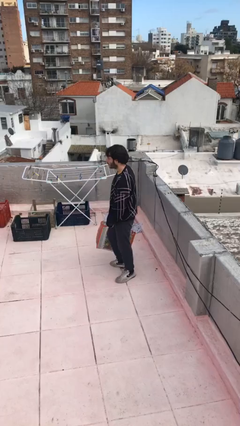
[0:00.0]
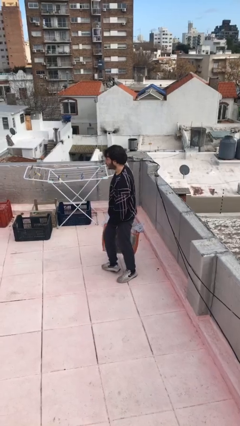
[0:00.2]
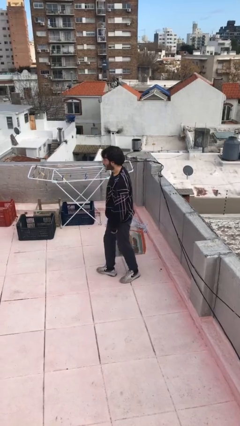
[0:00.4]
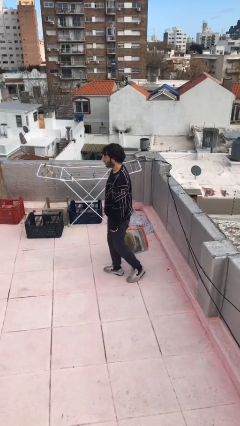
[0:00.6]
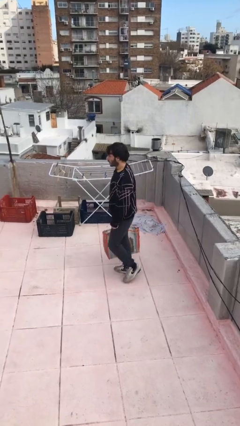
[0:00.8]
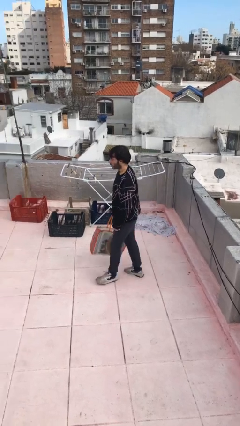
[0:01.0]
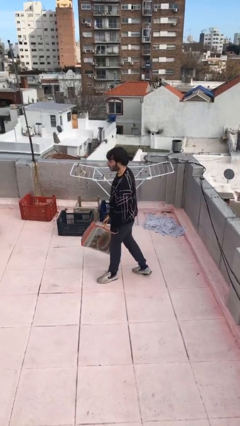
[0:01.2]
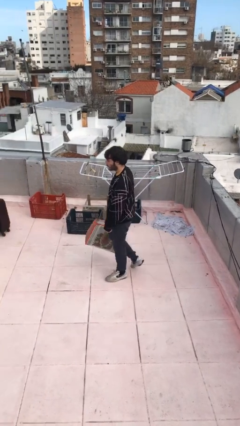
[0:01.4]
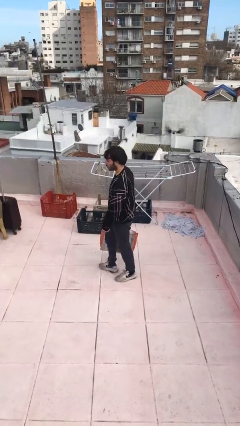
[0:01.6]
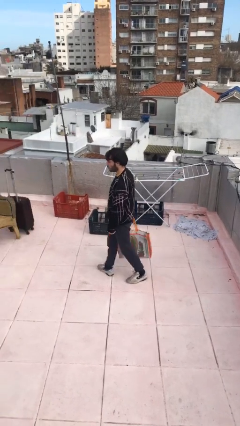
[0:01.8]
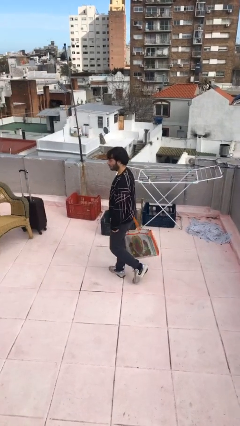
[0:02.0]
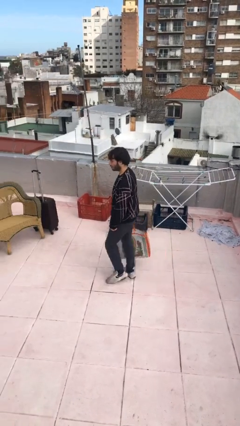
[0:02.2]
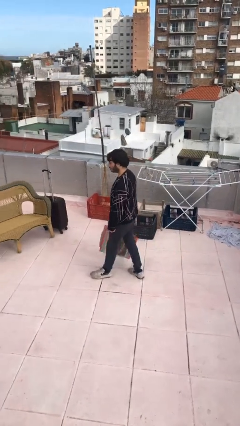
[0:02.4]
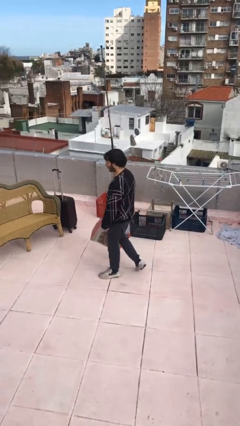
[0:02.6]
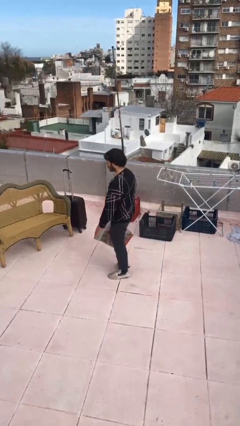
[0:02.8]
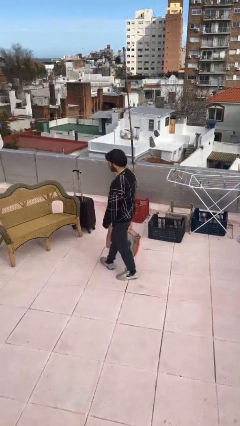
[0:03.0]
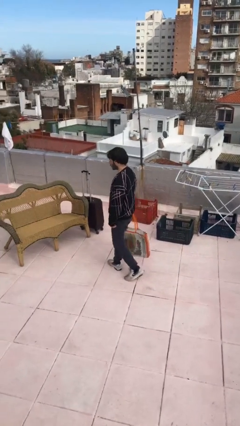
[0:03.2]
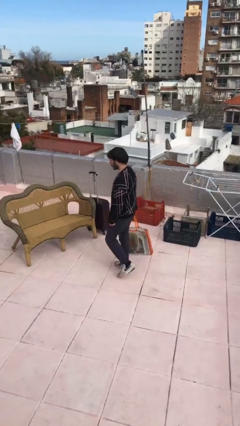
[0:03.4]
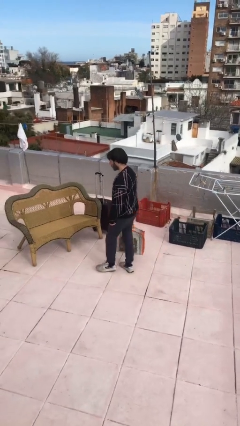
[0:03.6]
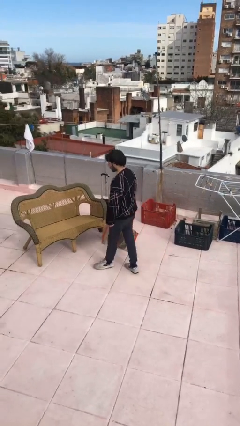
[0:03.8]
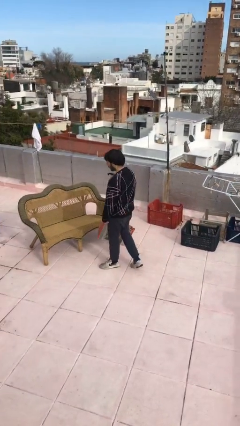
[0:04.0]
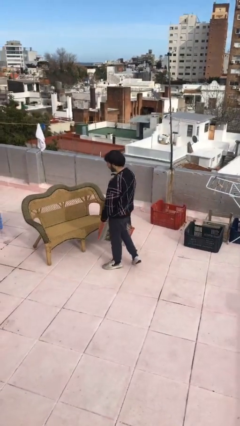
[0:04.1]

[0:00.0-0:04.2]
person carries groceries

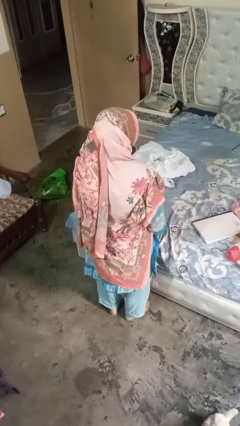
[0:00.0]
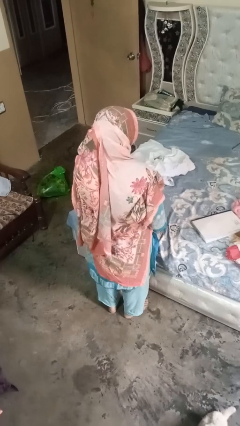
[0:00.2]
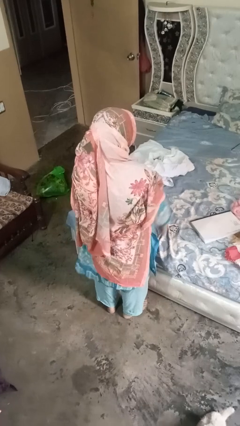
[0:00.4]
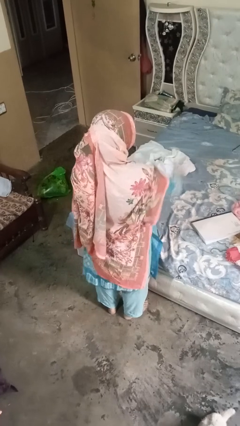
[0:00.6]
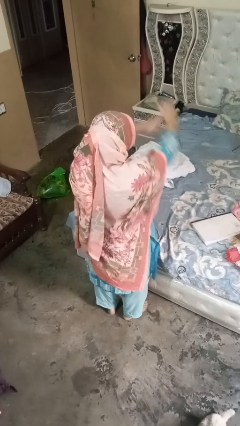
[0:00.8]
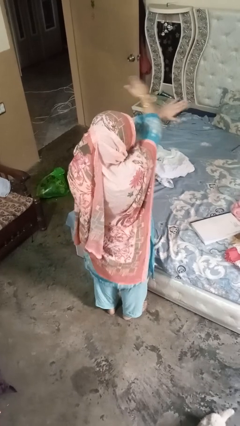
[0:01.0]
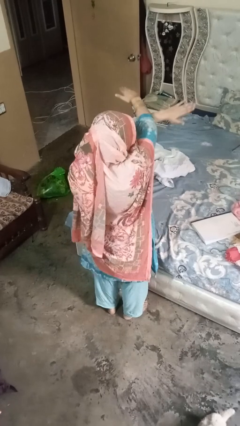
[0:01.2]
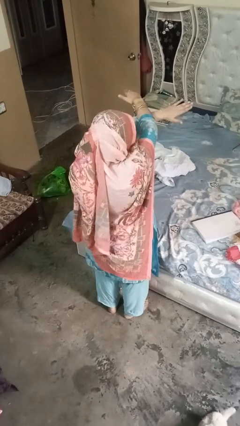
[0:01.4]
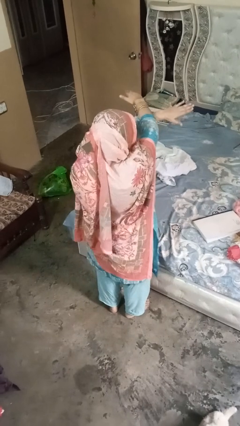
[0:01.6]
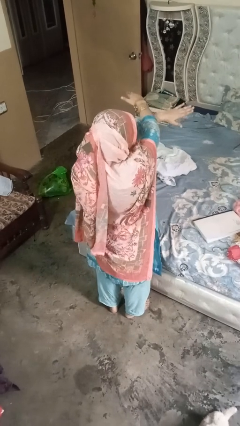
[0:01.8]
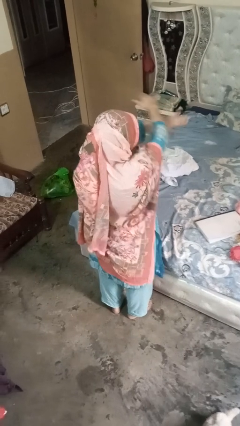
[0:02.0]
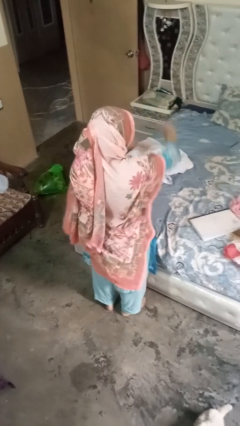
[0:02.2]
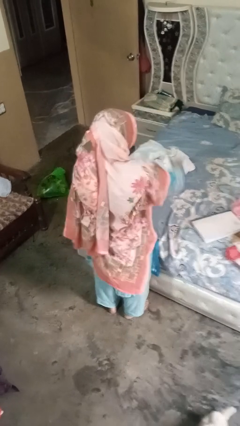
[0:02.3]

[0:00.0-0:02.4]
person gestures arms x

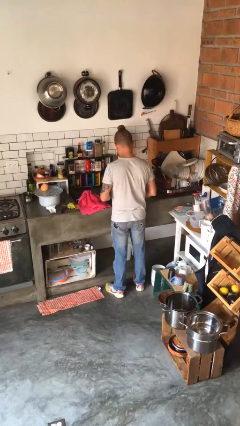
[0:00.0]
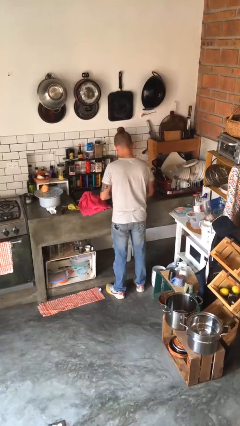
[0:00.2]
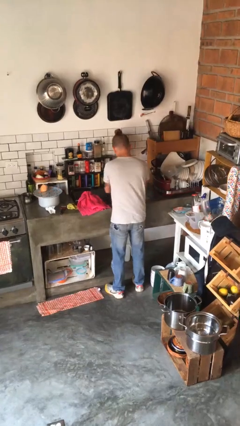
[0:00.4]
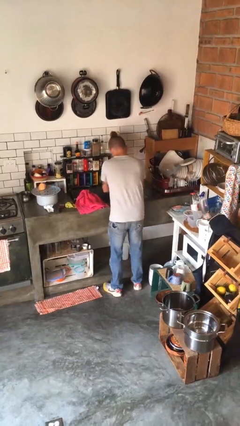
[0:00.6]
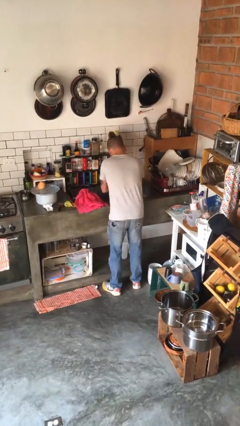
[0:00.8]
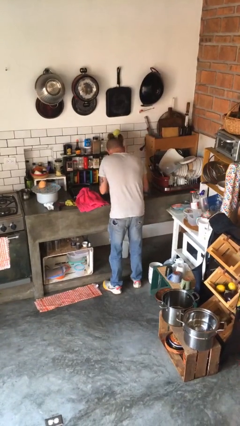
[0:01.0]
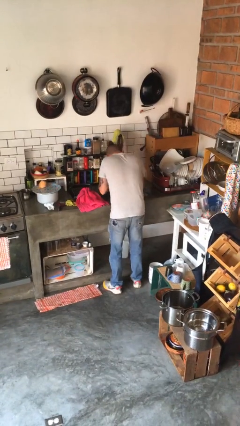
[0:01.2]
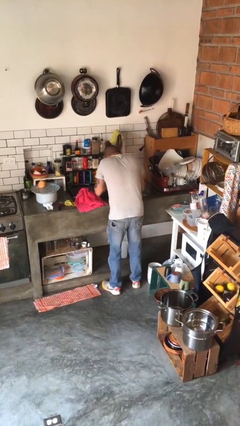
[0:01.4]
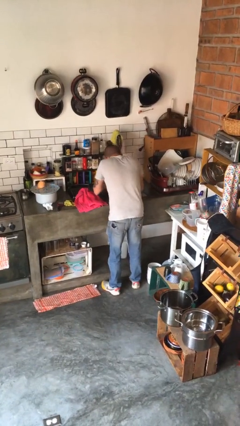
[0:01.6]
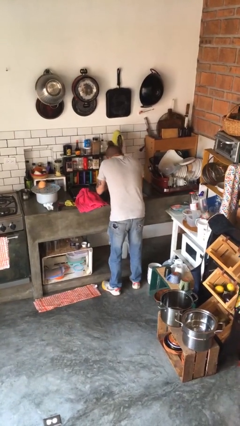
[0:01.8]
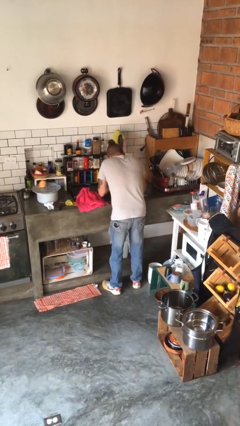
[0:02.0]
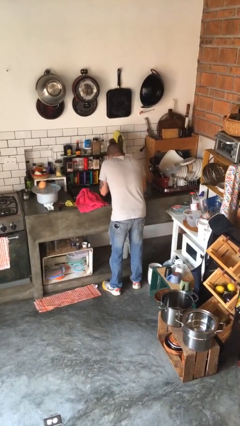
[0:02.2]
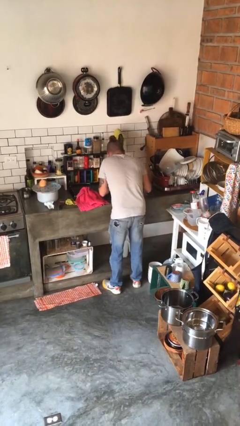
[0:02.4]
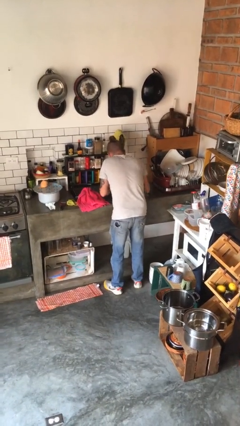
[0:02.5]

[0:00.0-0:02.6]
person washes face

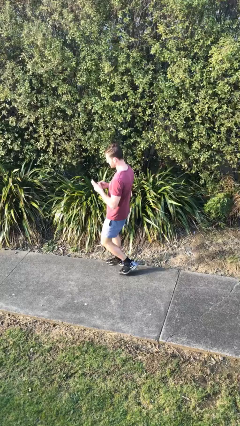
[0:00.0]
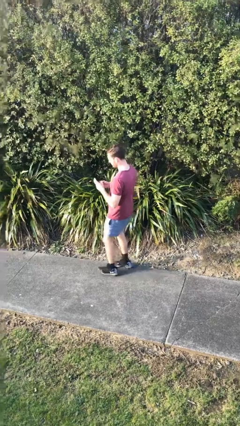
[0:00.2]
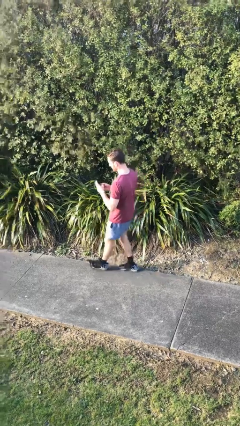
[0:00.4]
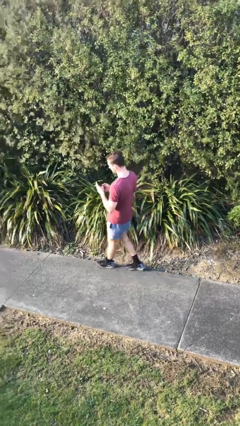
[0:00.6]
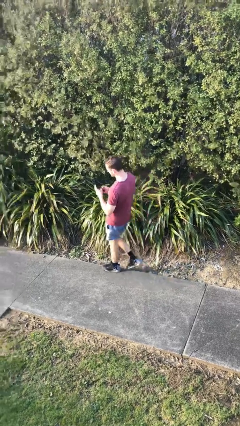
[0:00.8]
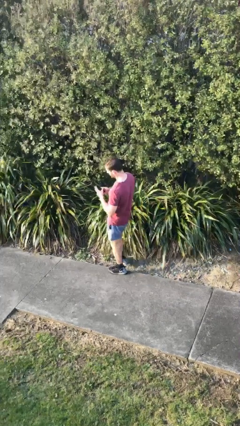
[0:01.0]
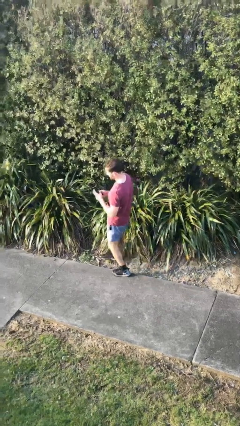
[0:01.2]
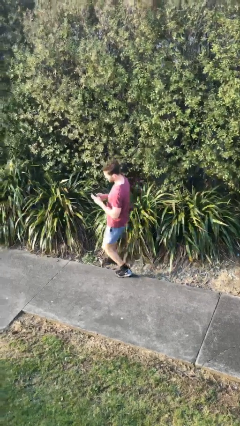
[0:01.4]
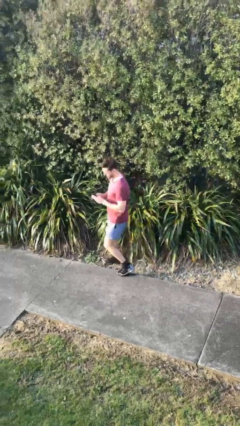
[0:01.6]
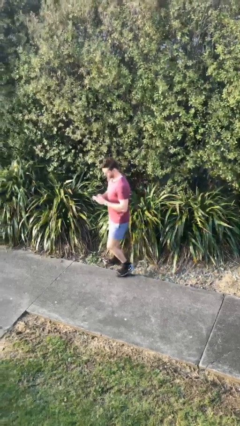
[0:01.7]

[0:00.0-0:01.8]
person texts on phone

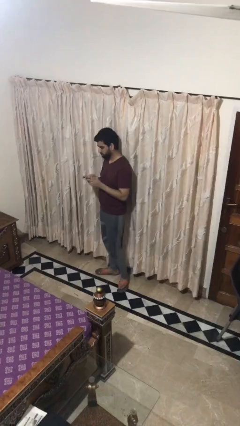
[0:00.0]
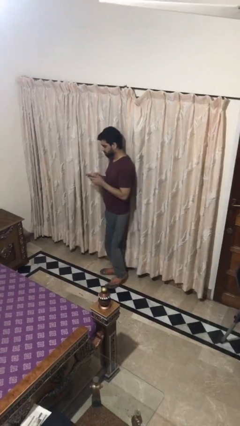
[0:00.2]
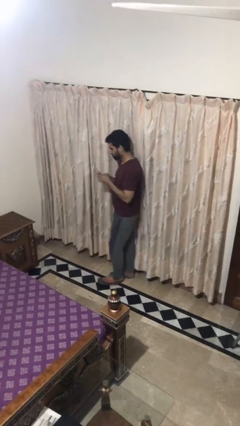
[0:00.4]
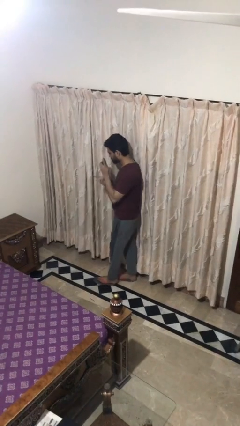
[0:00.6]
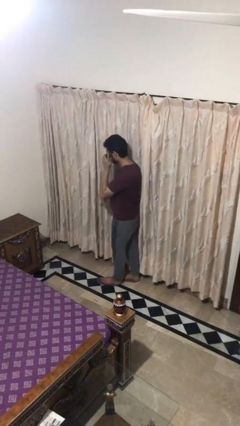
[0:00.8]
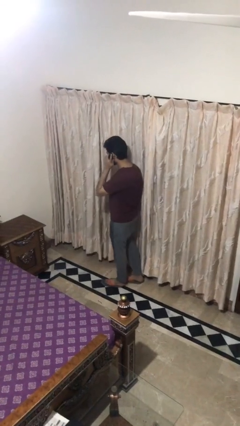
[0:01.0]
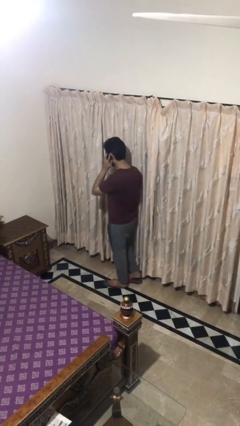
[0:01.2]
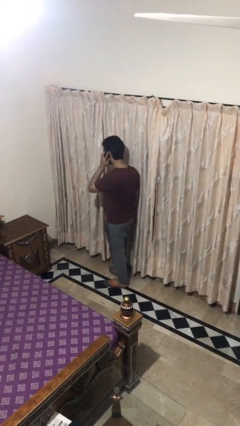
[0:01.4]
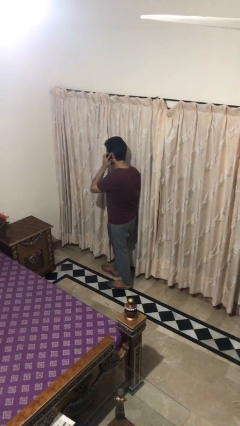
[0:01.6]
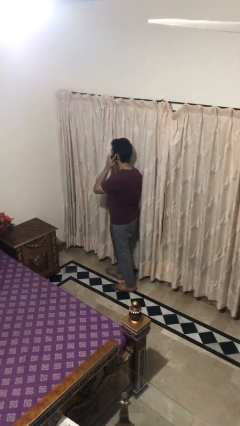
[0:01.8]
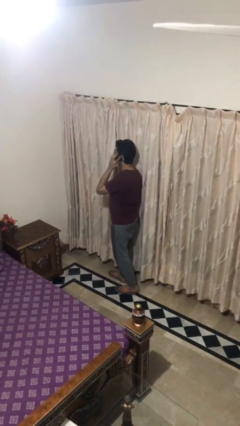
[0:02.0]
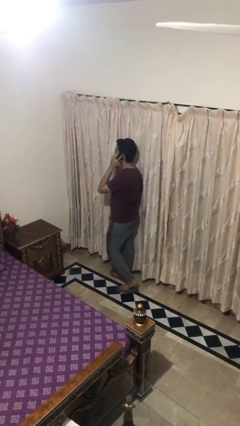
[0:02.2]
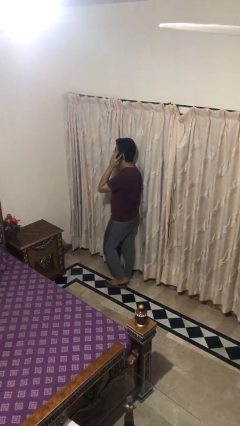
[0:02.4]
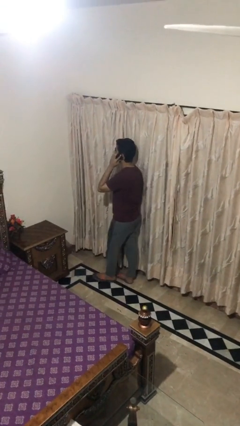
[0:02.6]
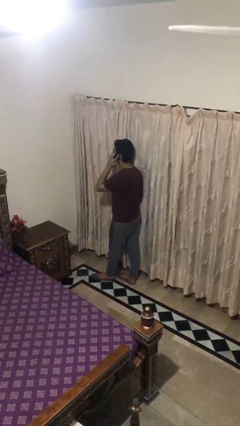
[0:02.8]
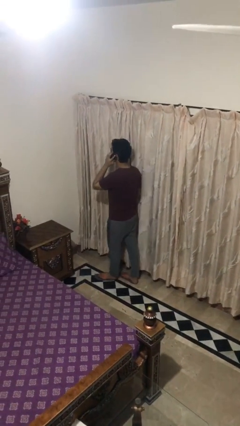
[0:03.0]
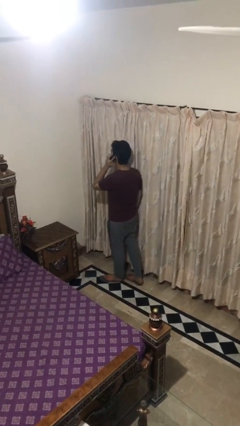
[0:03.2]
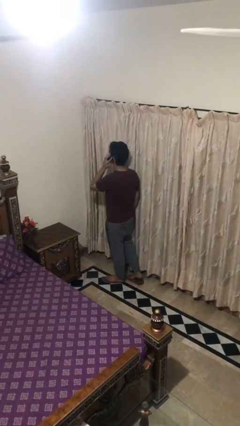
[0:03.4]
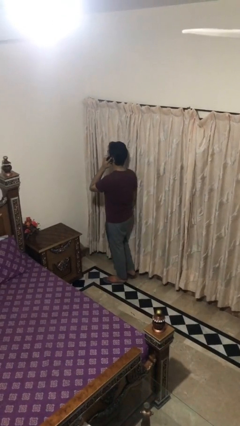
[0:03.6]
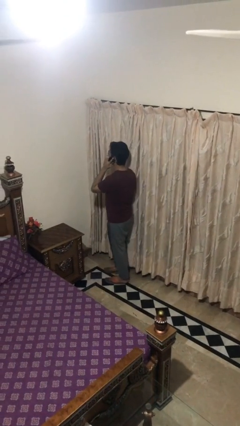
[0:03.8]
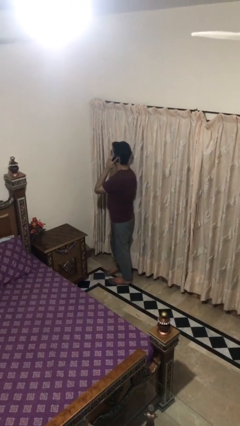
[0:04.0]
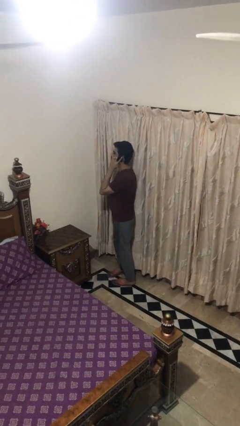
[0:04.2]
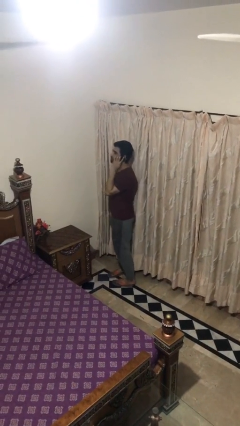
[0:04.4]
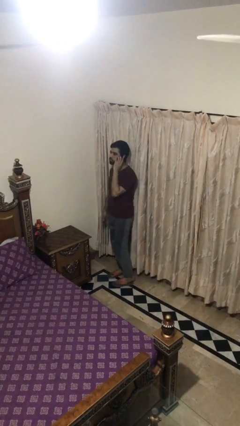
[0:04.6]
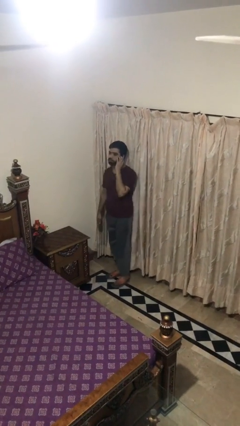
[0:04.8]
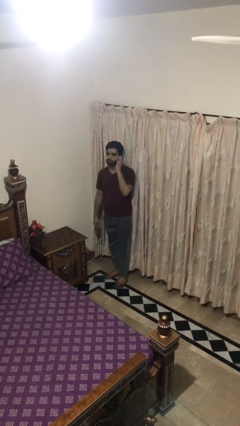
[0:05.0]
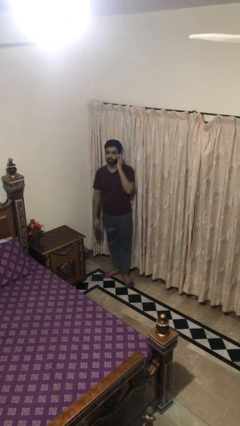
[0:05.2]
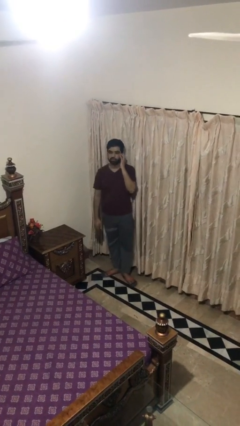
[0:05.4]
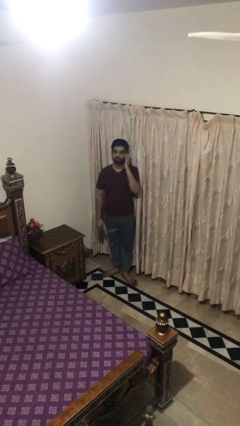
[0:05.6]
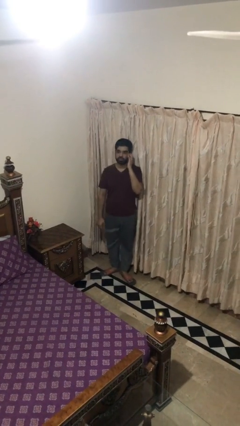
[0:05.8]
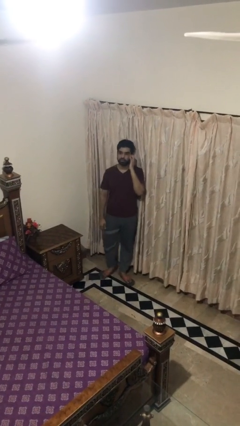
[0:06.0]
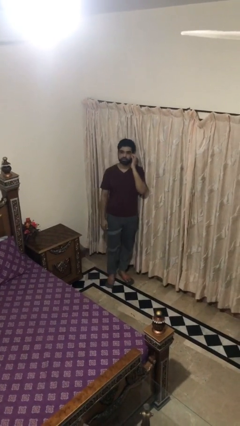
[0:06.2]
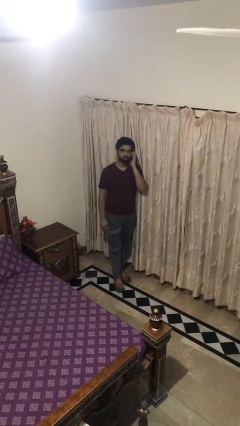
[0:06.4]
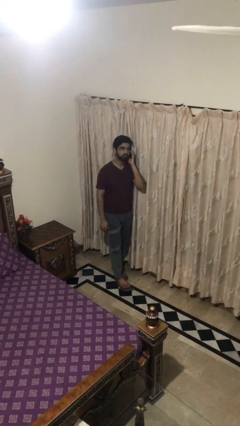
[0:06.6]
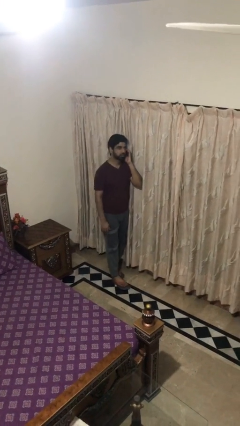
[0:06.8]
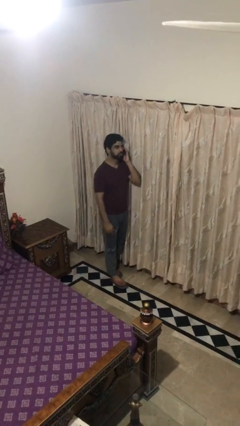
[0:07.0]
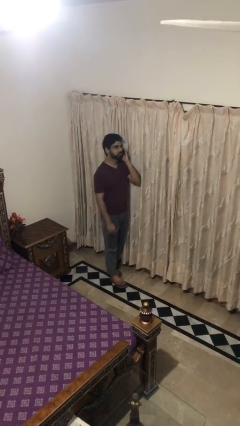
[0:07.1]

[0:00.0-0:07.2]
person talks on phone
